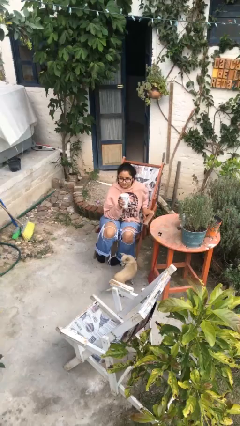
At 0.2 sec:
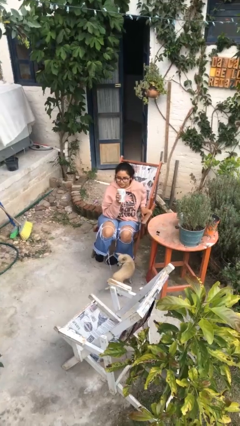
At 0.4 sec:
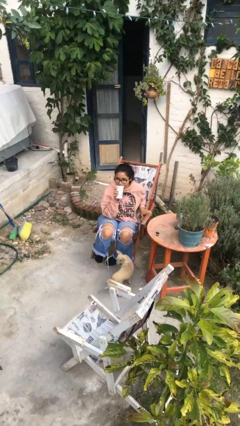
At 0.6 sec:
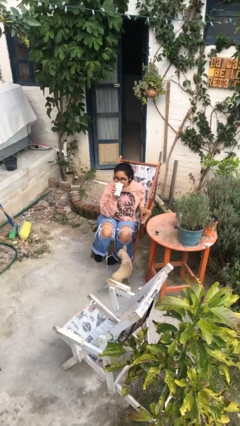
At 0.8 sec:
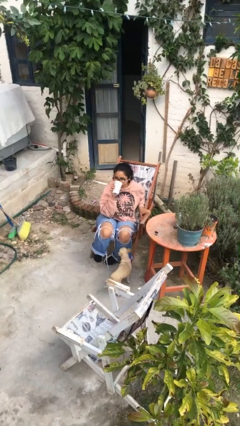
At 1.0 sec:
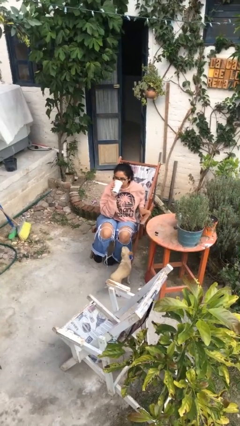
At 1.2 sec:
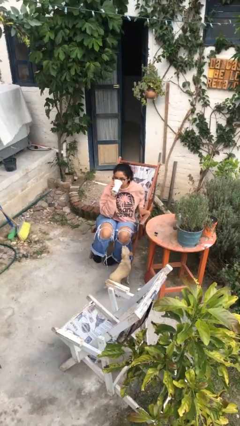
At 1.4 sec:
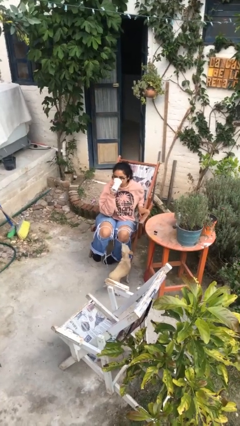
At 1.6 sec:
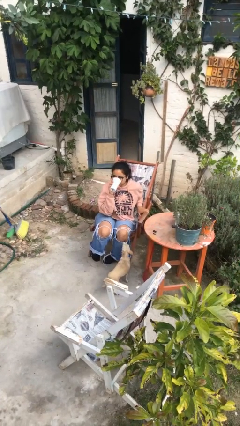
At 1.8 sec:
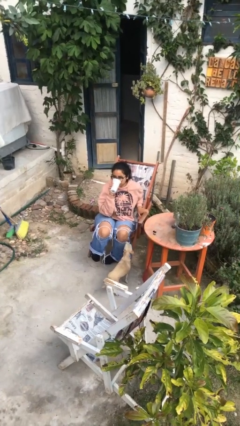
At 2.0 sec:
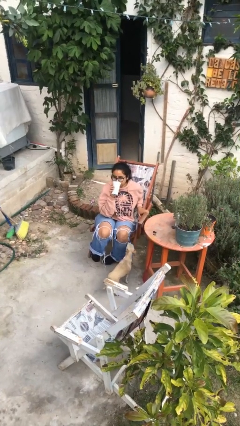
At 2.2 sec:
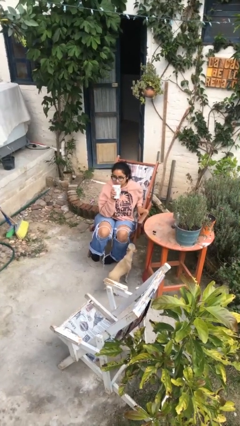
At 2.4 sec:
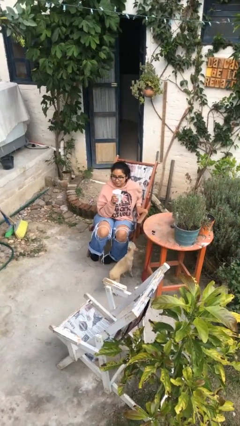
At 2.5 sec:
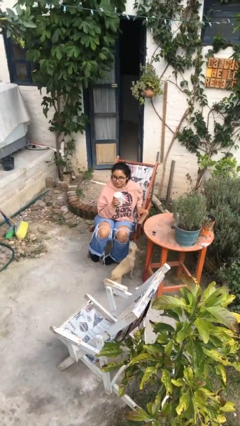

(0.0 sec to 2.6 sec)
person drinks from mug

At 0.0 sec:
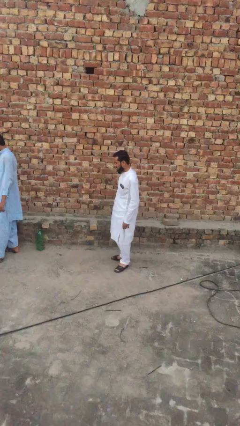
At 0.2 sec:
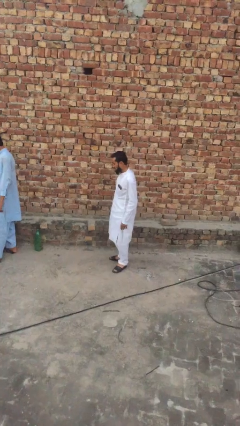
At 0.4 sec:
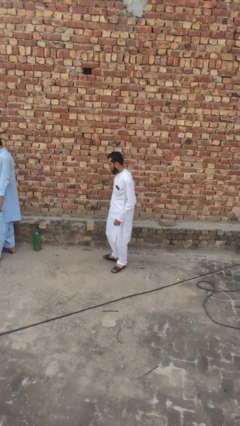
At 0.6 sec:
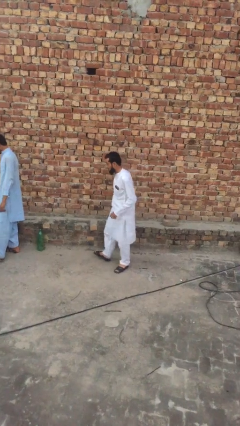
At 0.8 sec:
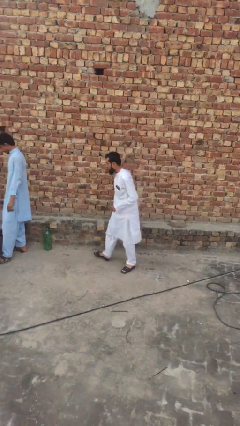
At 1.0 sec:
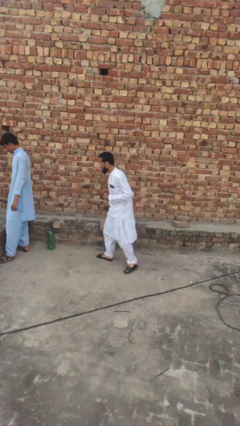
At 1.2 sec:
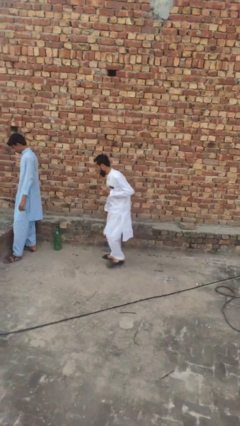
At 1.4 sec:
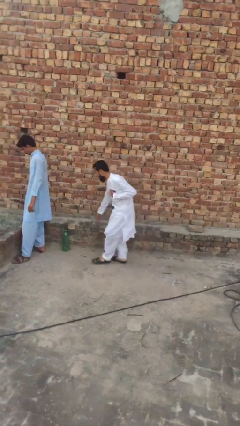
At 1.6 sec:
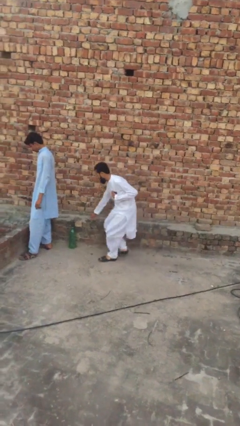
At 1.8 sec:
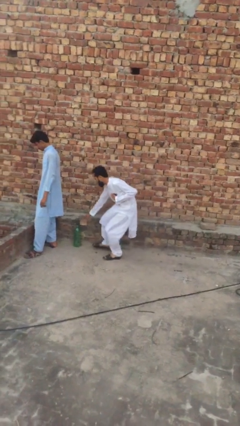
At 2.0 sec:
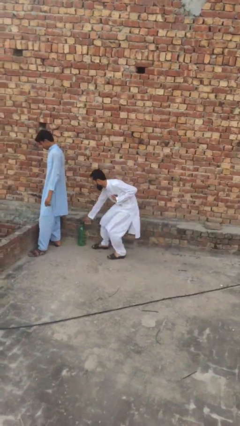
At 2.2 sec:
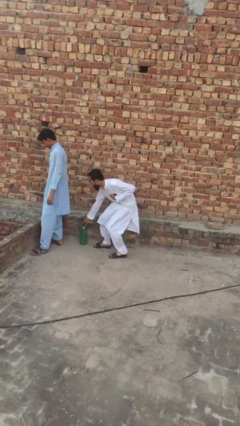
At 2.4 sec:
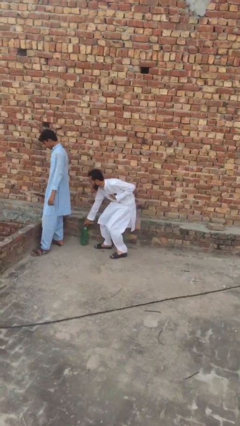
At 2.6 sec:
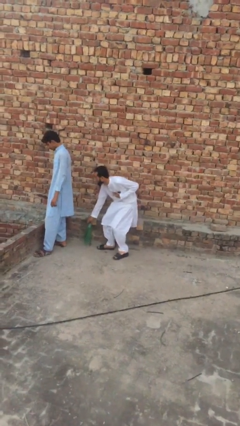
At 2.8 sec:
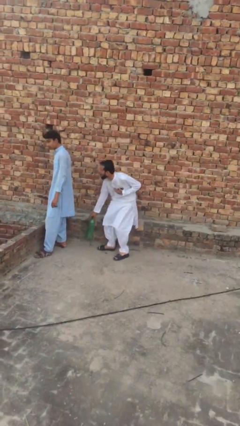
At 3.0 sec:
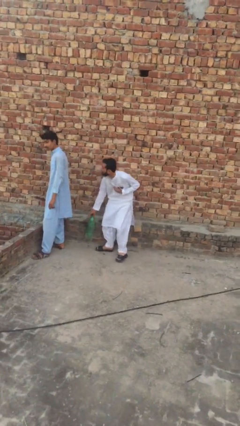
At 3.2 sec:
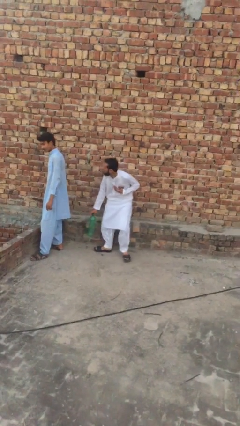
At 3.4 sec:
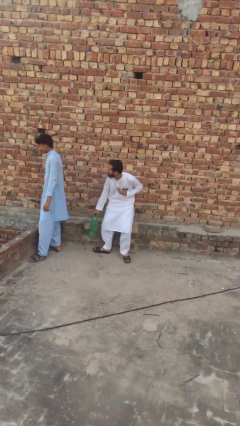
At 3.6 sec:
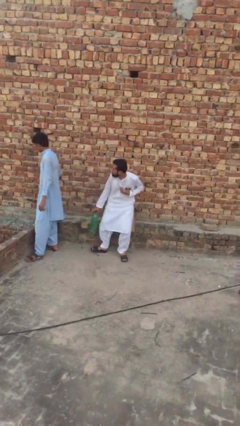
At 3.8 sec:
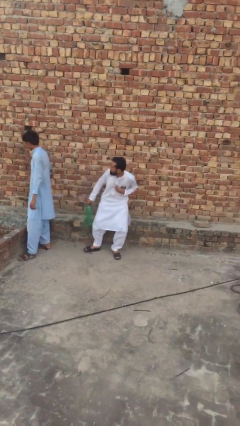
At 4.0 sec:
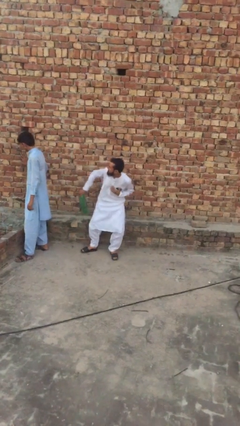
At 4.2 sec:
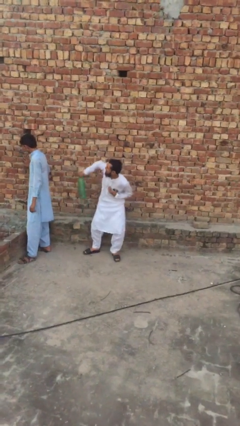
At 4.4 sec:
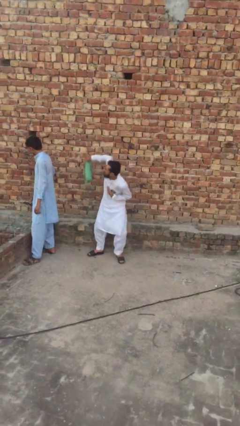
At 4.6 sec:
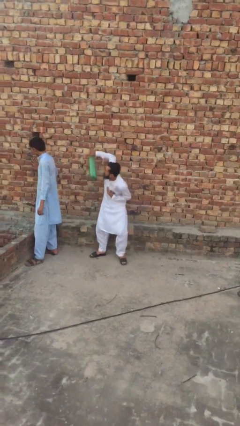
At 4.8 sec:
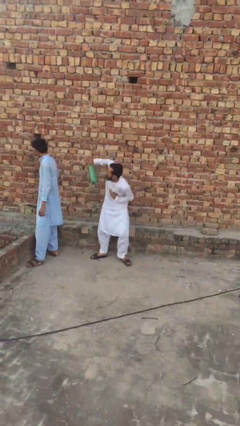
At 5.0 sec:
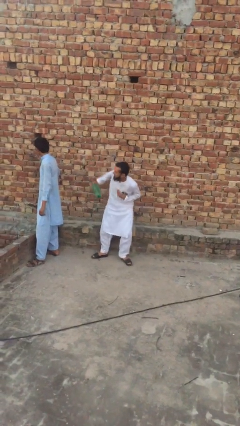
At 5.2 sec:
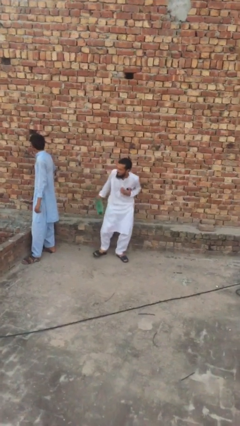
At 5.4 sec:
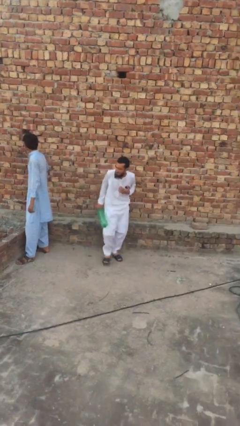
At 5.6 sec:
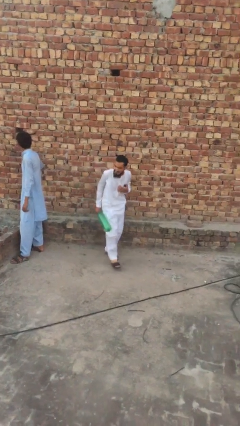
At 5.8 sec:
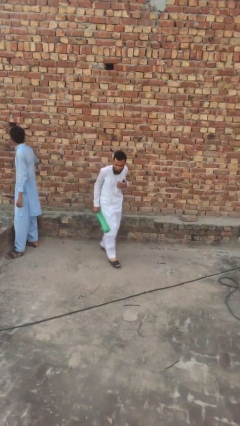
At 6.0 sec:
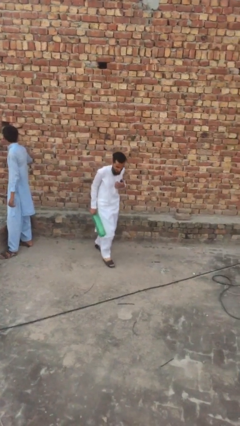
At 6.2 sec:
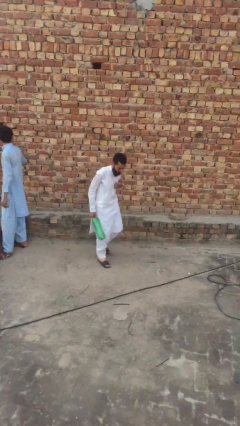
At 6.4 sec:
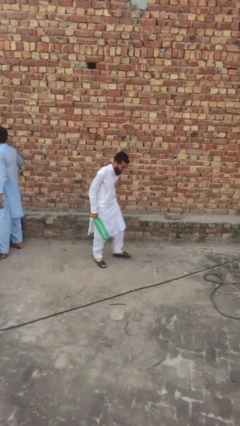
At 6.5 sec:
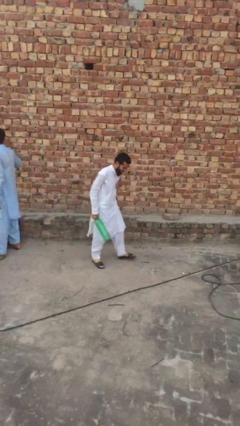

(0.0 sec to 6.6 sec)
person steals object from person

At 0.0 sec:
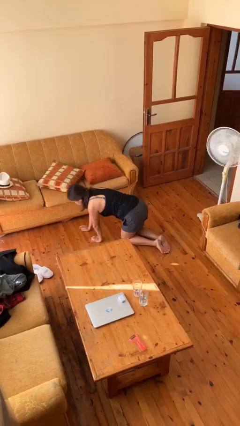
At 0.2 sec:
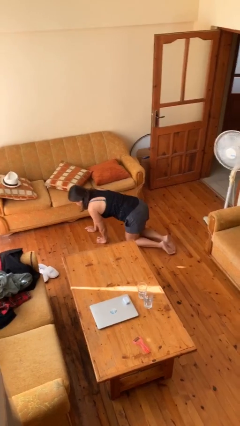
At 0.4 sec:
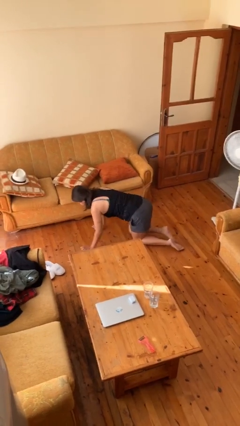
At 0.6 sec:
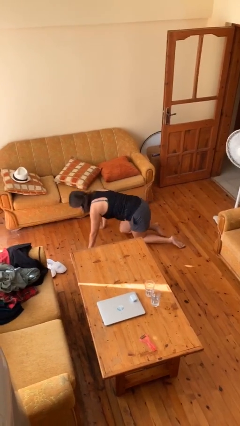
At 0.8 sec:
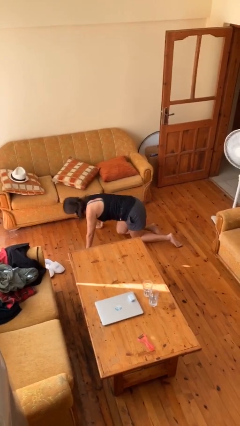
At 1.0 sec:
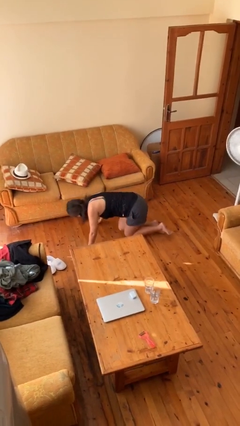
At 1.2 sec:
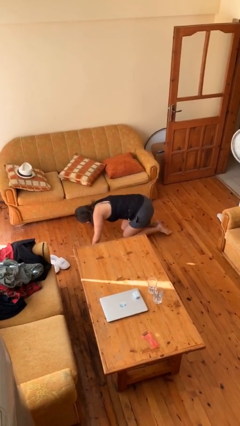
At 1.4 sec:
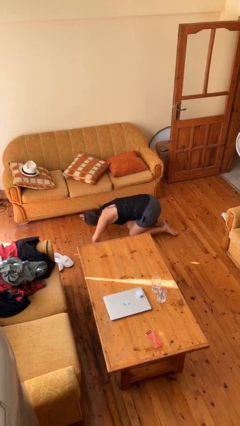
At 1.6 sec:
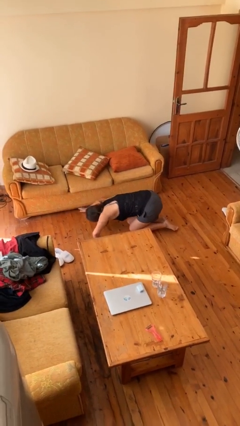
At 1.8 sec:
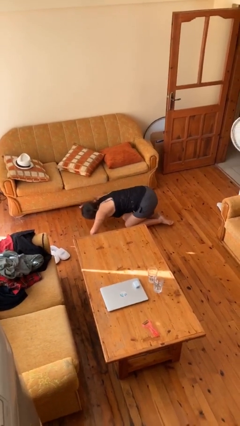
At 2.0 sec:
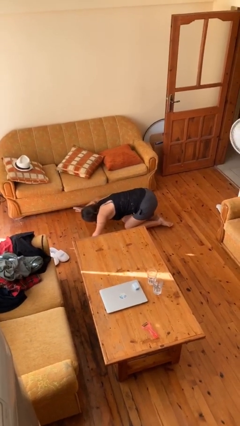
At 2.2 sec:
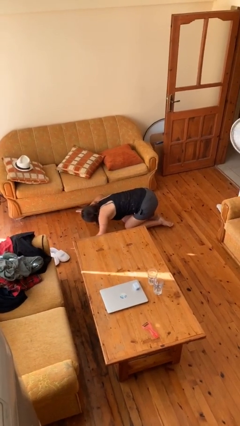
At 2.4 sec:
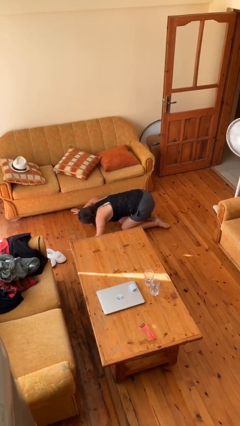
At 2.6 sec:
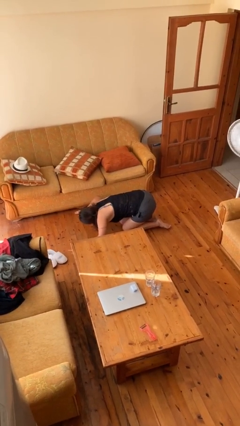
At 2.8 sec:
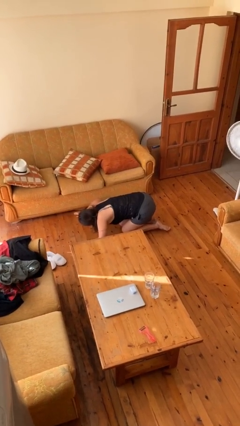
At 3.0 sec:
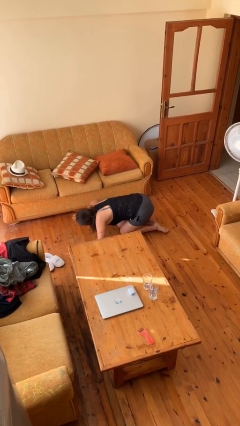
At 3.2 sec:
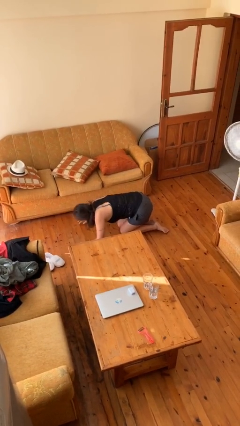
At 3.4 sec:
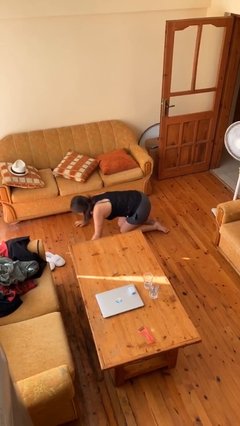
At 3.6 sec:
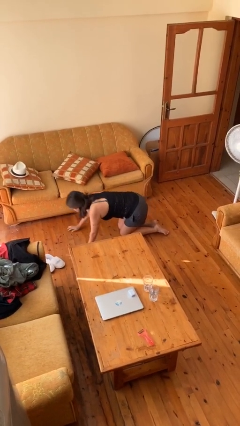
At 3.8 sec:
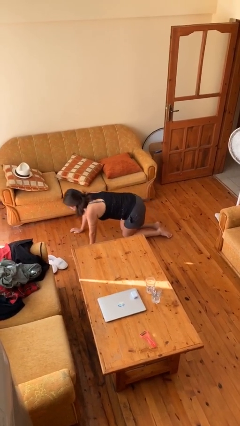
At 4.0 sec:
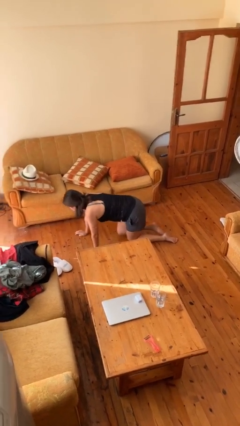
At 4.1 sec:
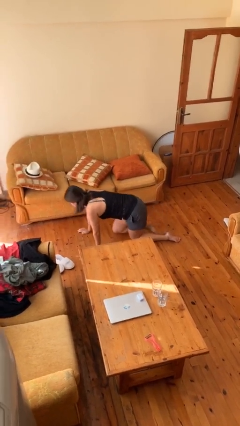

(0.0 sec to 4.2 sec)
person searches under couch

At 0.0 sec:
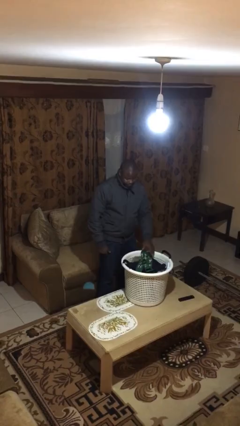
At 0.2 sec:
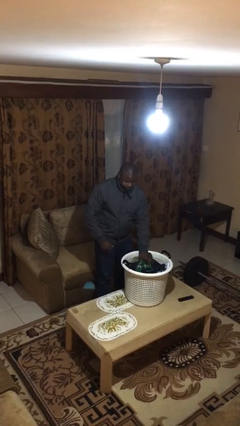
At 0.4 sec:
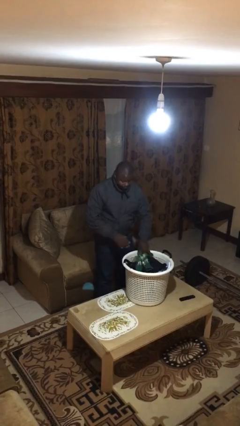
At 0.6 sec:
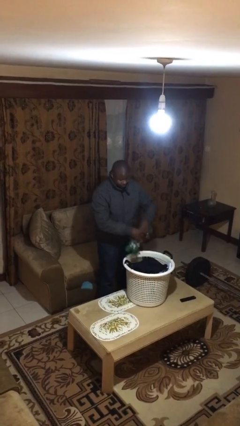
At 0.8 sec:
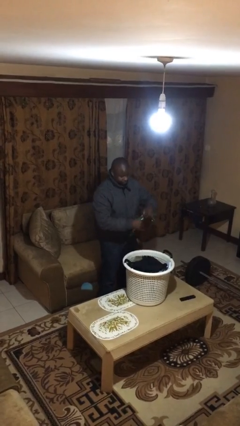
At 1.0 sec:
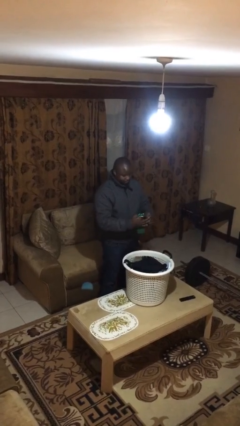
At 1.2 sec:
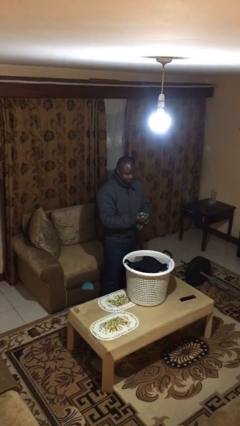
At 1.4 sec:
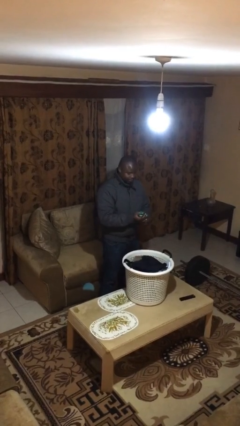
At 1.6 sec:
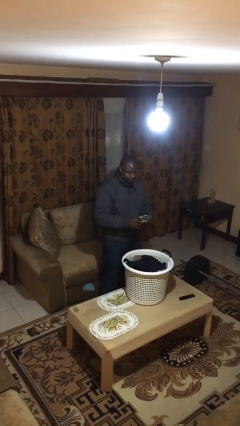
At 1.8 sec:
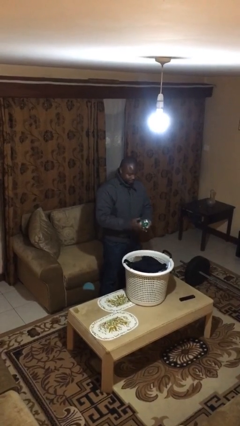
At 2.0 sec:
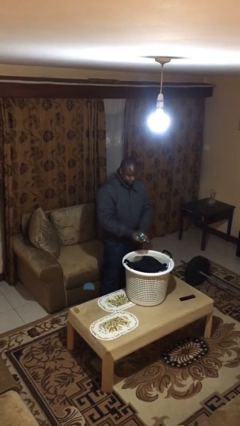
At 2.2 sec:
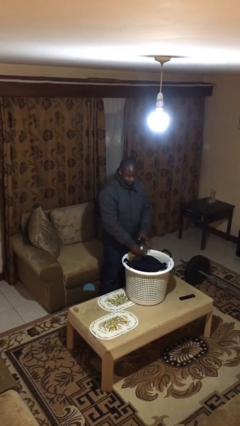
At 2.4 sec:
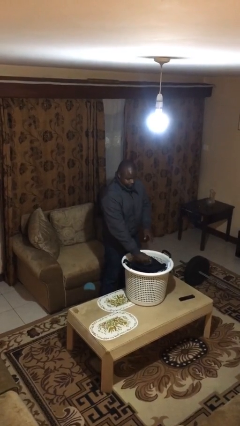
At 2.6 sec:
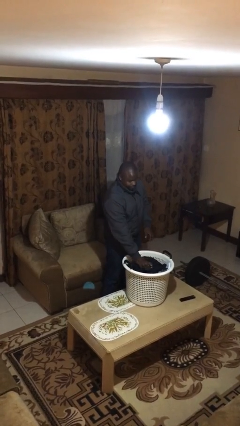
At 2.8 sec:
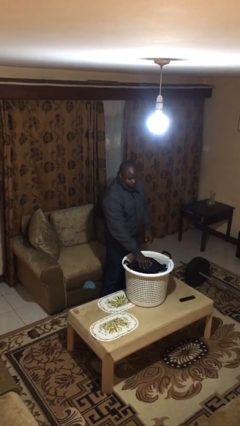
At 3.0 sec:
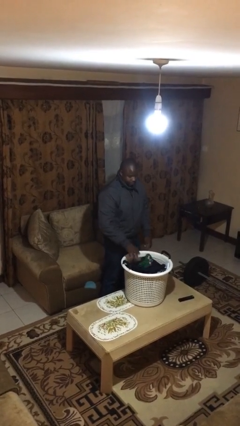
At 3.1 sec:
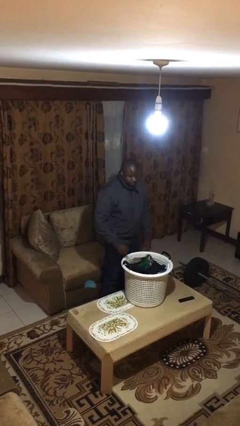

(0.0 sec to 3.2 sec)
person folds socks

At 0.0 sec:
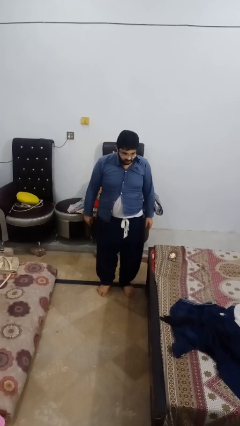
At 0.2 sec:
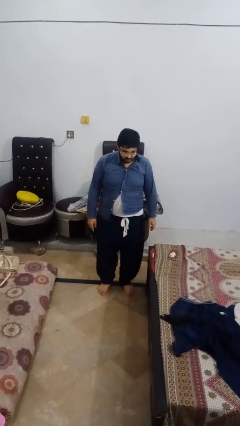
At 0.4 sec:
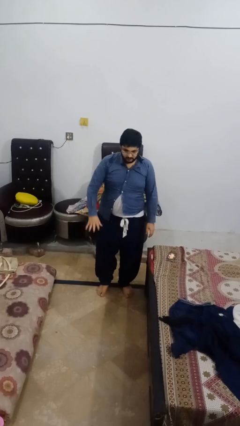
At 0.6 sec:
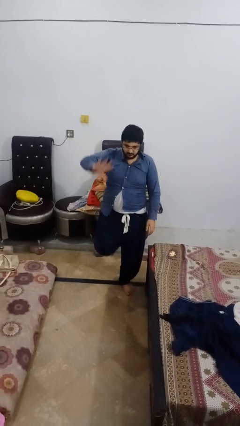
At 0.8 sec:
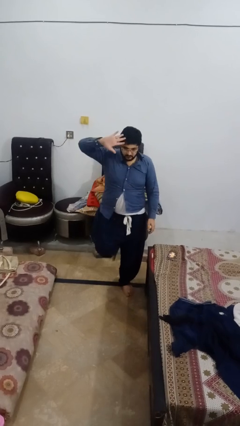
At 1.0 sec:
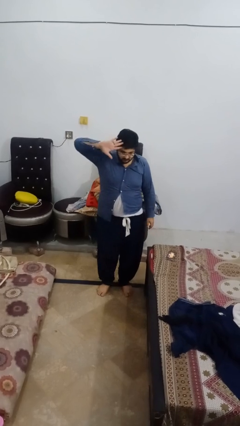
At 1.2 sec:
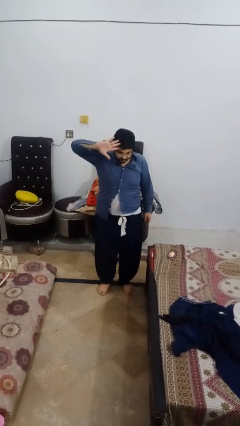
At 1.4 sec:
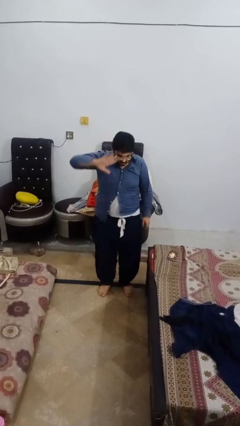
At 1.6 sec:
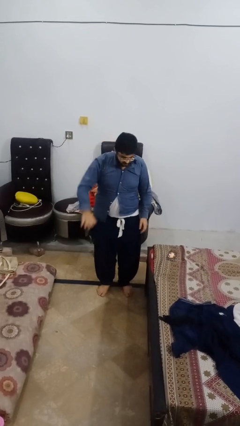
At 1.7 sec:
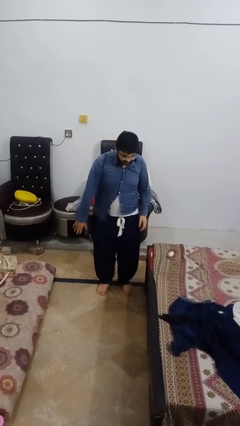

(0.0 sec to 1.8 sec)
person salutes
